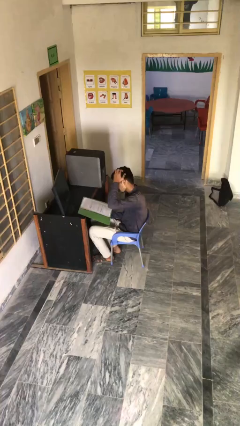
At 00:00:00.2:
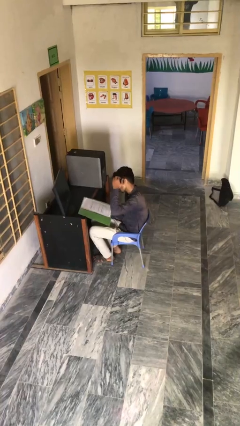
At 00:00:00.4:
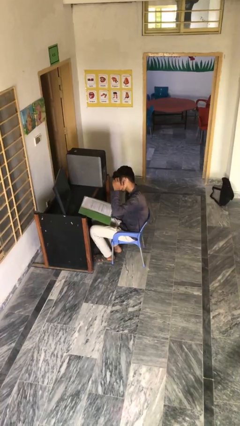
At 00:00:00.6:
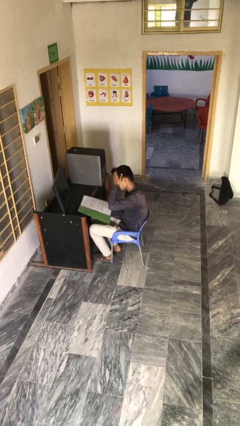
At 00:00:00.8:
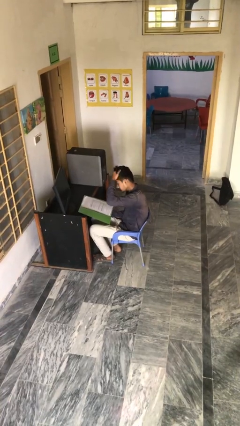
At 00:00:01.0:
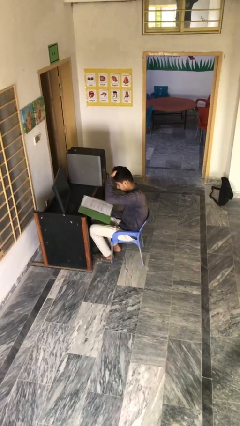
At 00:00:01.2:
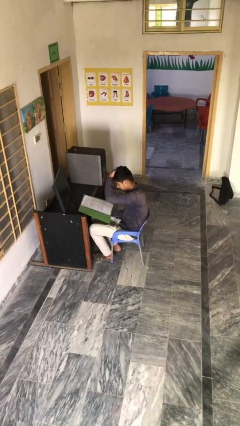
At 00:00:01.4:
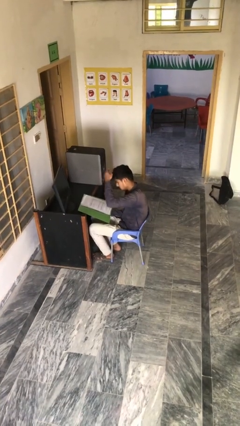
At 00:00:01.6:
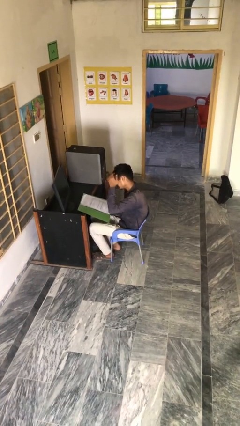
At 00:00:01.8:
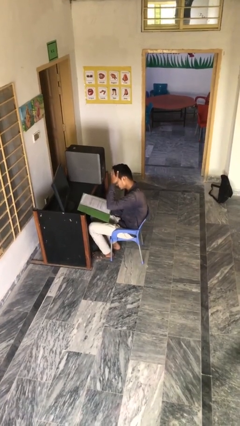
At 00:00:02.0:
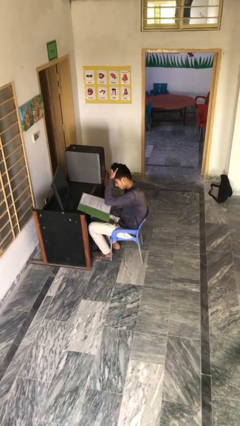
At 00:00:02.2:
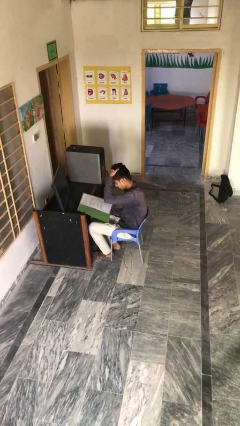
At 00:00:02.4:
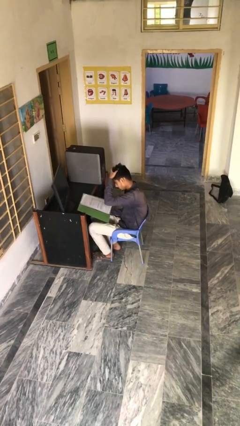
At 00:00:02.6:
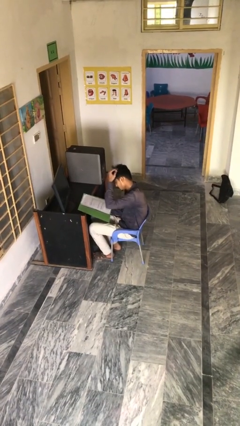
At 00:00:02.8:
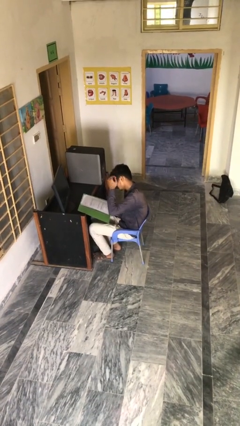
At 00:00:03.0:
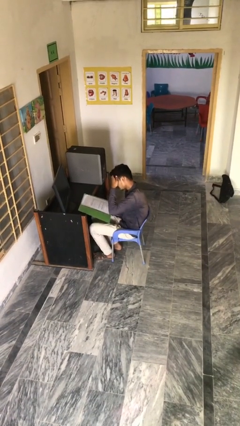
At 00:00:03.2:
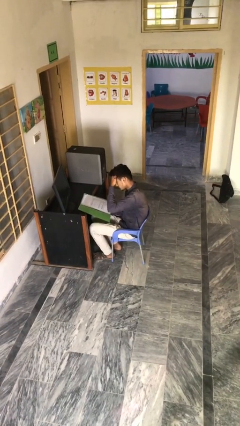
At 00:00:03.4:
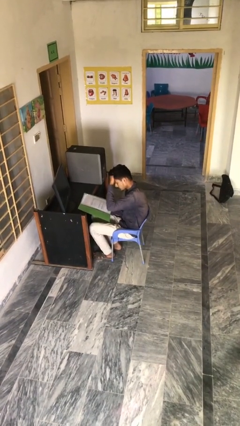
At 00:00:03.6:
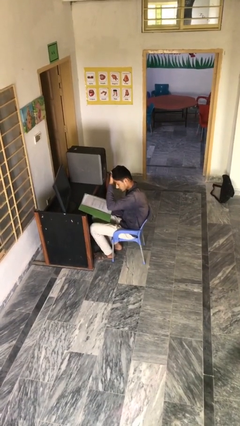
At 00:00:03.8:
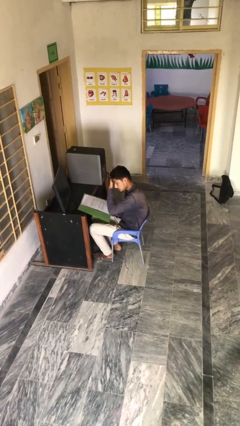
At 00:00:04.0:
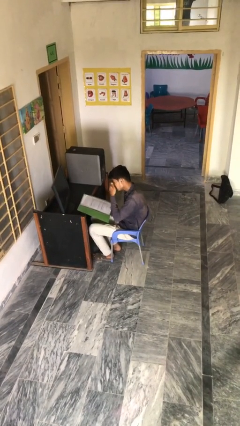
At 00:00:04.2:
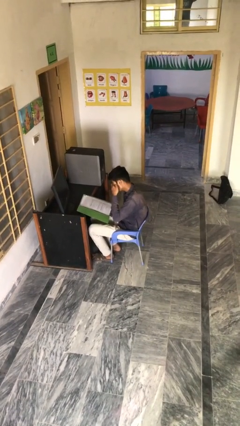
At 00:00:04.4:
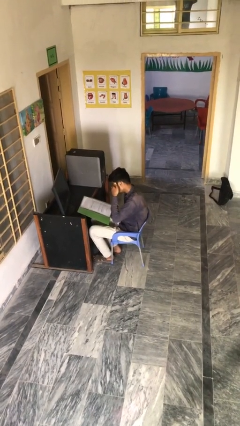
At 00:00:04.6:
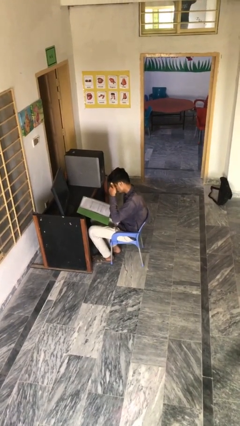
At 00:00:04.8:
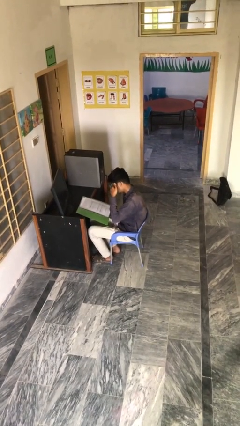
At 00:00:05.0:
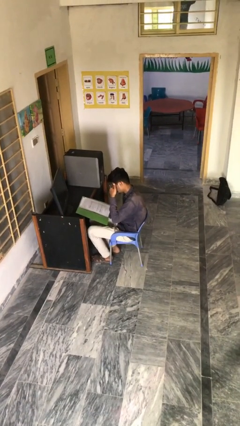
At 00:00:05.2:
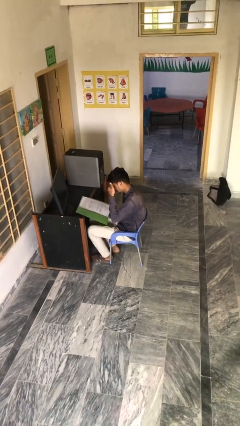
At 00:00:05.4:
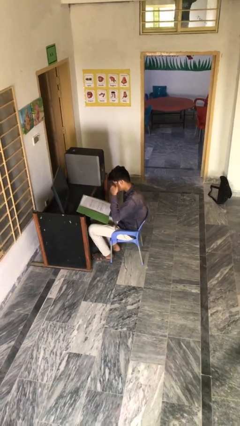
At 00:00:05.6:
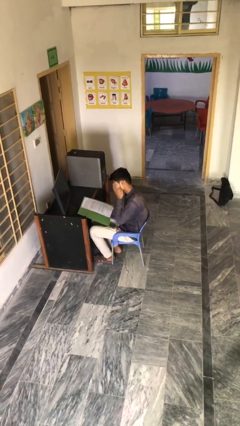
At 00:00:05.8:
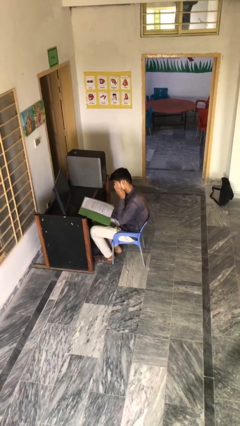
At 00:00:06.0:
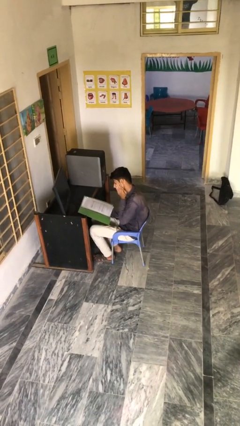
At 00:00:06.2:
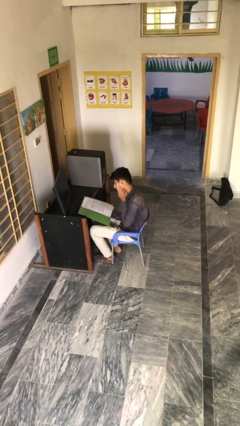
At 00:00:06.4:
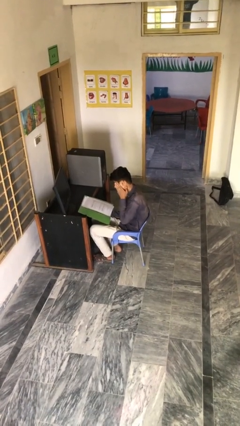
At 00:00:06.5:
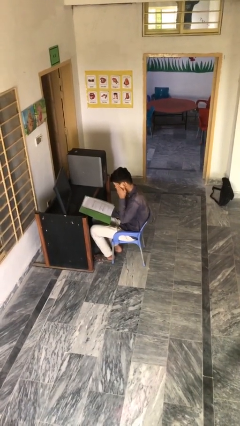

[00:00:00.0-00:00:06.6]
person reads document

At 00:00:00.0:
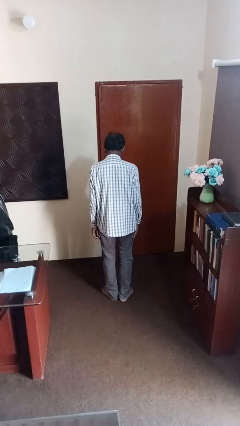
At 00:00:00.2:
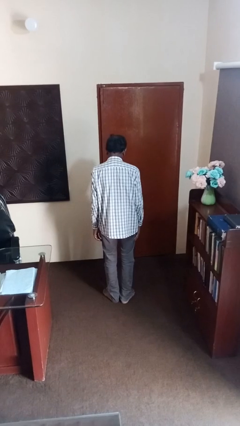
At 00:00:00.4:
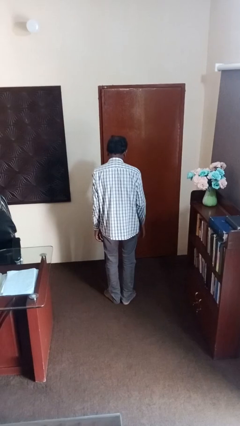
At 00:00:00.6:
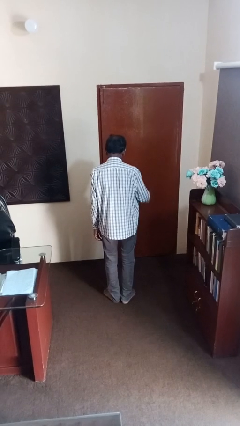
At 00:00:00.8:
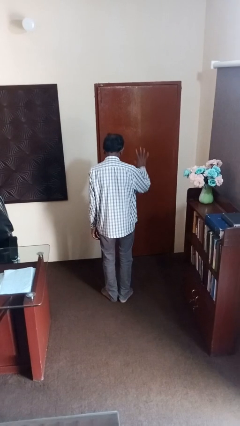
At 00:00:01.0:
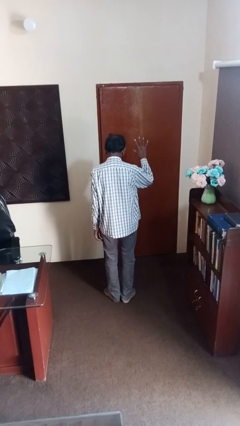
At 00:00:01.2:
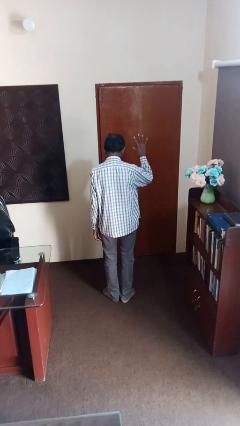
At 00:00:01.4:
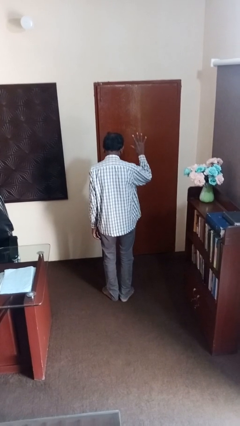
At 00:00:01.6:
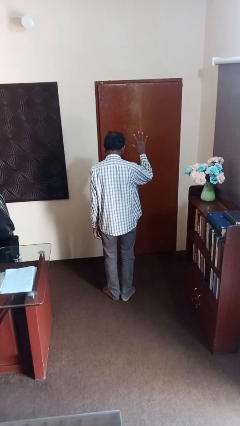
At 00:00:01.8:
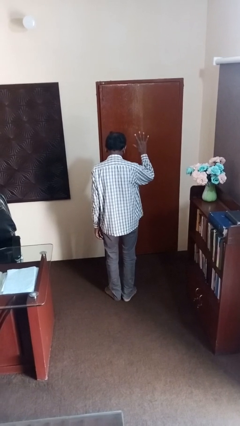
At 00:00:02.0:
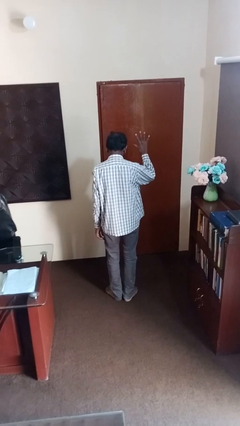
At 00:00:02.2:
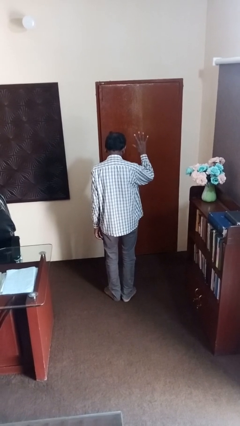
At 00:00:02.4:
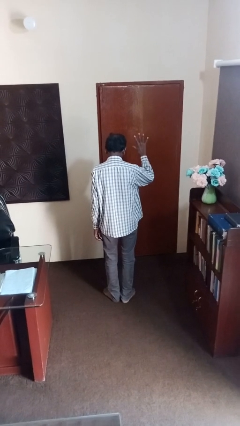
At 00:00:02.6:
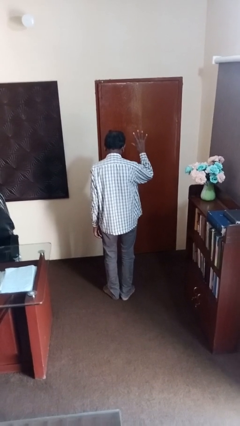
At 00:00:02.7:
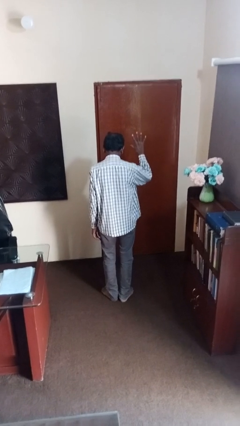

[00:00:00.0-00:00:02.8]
person gestures number five

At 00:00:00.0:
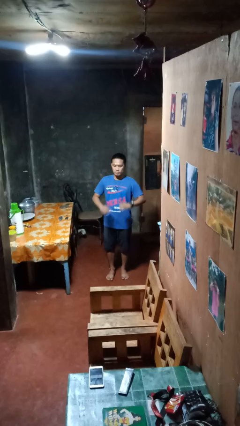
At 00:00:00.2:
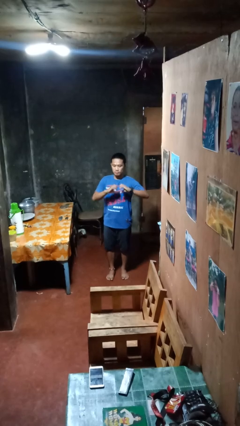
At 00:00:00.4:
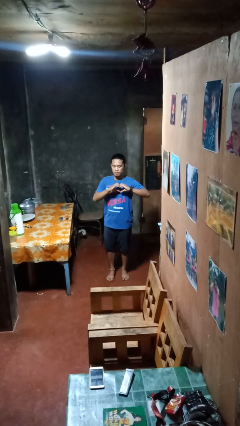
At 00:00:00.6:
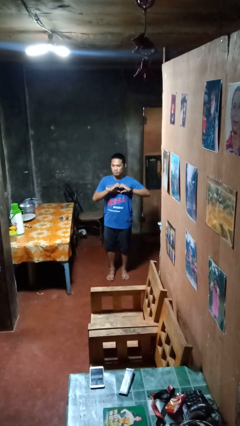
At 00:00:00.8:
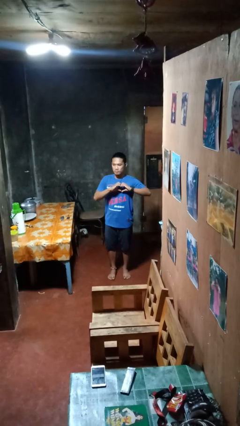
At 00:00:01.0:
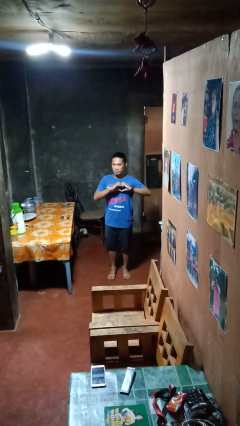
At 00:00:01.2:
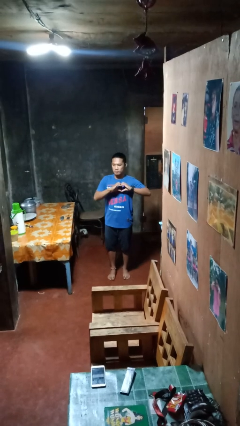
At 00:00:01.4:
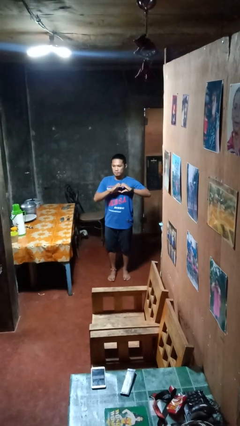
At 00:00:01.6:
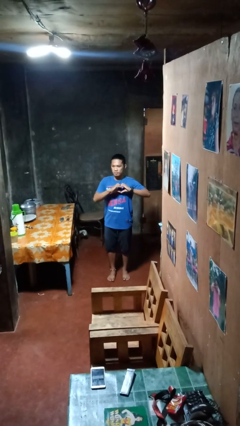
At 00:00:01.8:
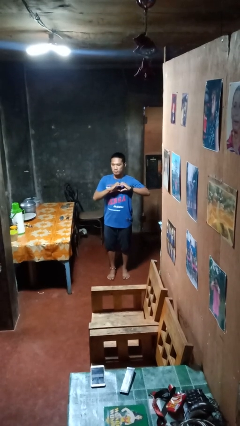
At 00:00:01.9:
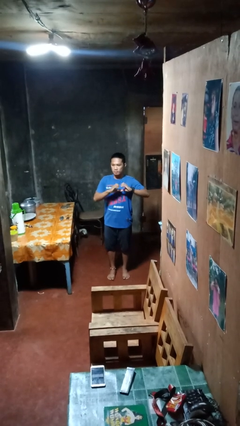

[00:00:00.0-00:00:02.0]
person gestures heart

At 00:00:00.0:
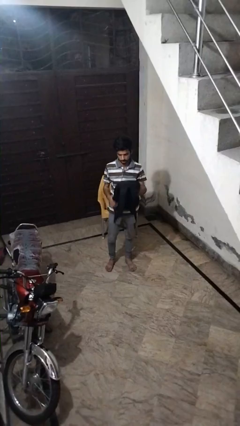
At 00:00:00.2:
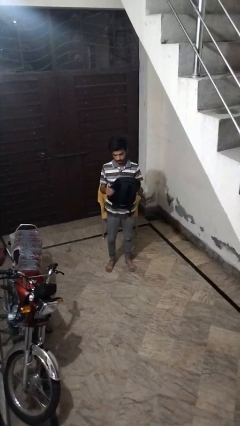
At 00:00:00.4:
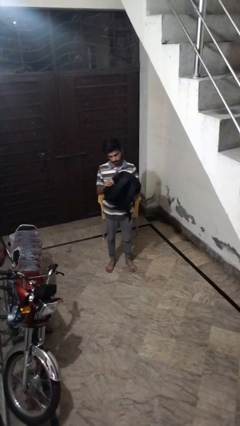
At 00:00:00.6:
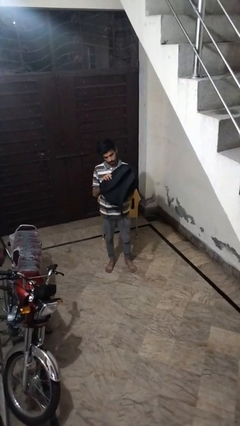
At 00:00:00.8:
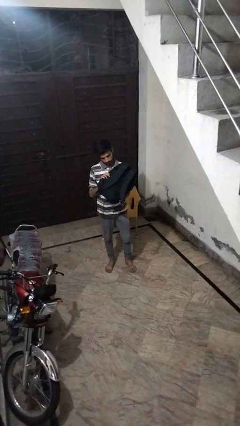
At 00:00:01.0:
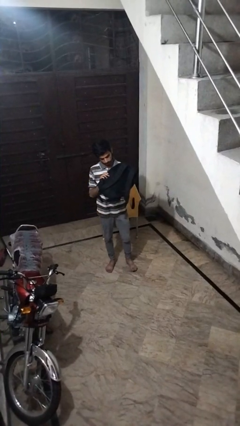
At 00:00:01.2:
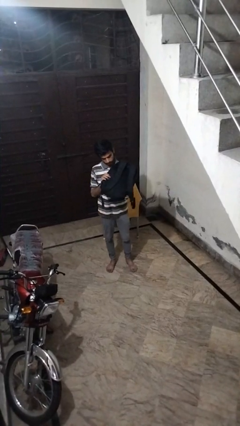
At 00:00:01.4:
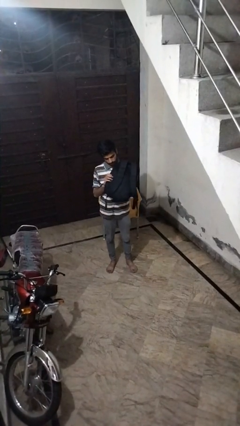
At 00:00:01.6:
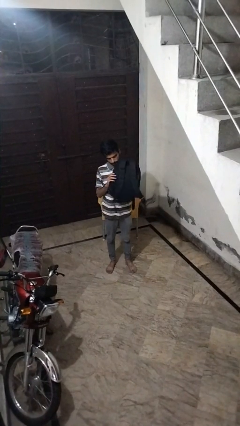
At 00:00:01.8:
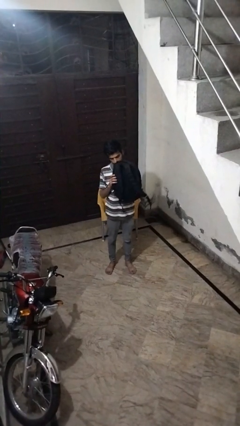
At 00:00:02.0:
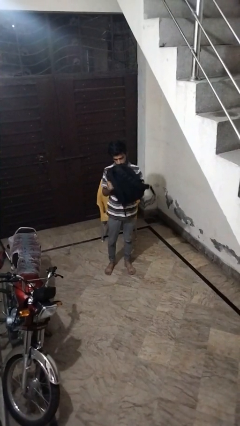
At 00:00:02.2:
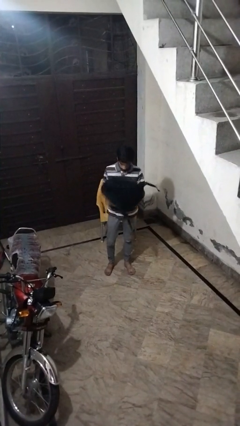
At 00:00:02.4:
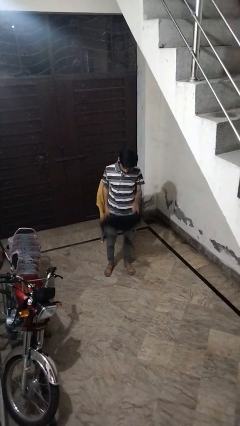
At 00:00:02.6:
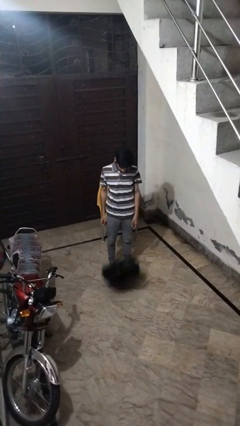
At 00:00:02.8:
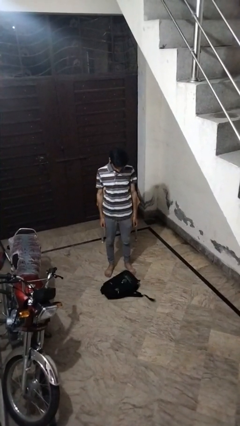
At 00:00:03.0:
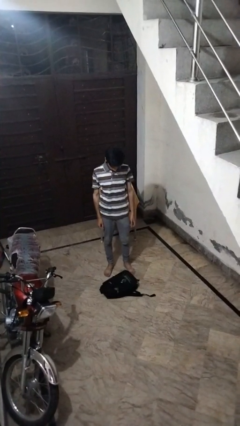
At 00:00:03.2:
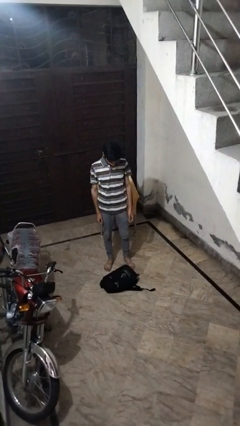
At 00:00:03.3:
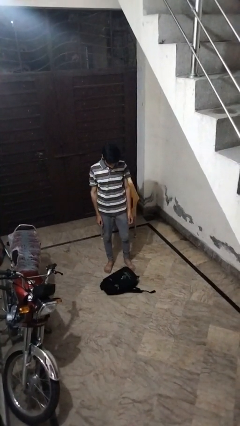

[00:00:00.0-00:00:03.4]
person drops object

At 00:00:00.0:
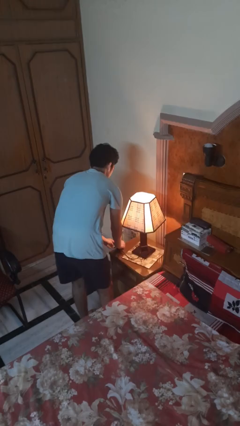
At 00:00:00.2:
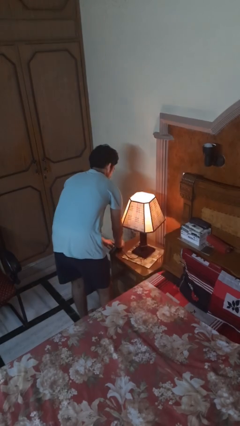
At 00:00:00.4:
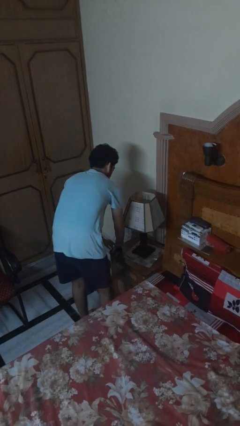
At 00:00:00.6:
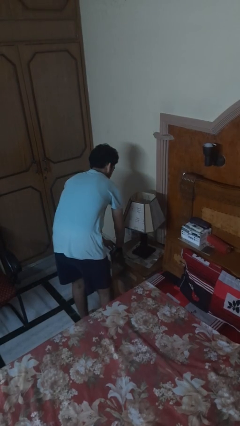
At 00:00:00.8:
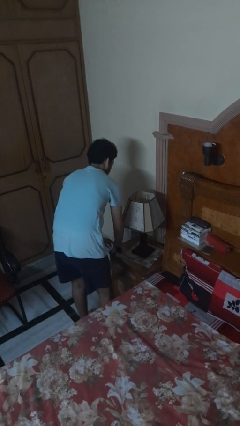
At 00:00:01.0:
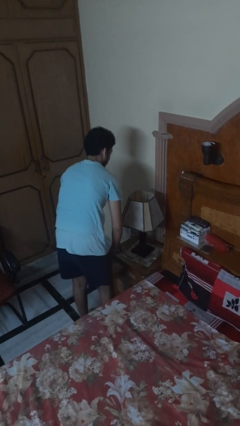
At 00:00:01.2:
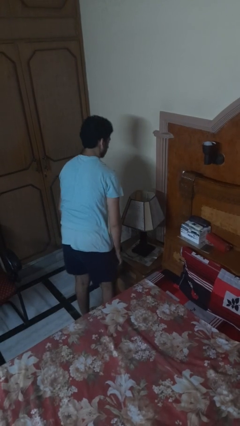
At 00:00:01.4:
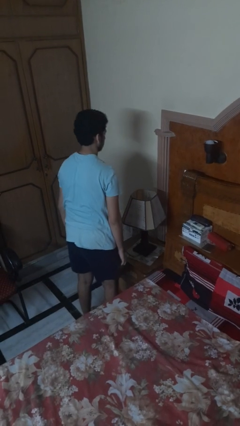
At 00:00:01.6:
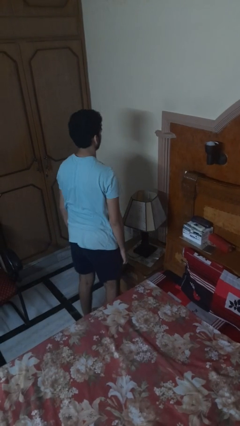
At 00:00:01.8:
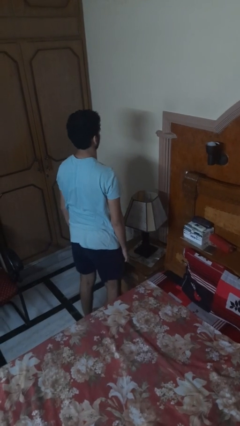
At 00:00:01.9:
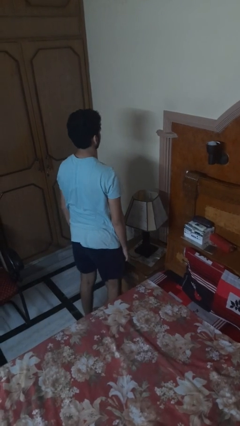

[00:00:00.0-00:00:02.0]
person turns off lamp

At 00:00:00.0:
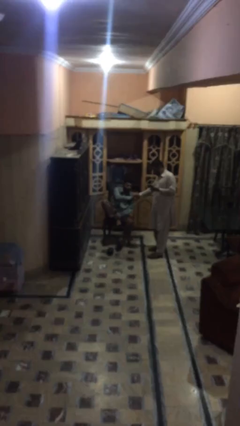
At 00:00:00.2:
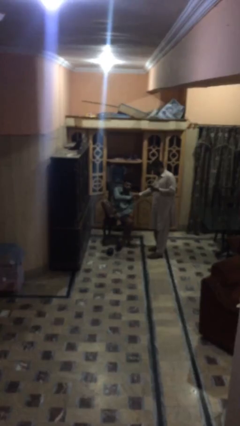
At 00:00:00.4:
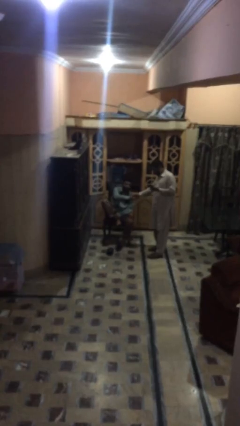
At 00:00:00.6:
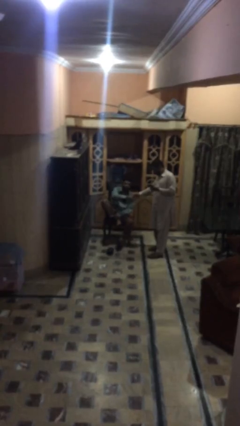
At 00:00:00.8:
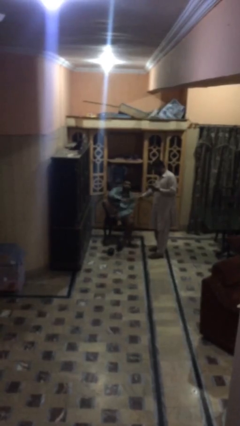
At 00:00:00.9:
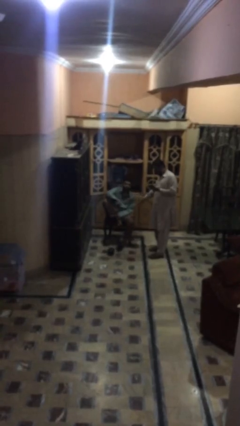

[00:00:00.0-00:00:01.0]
person shakes hand
